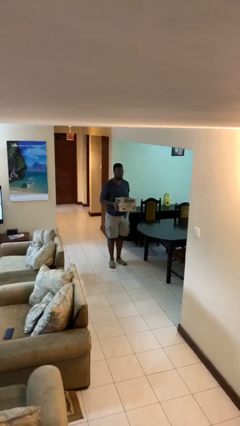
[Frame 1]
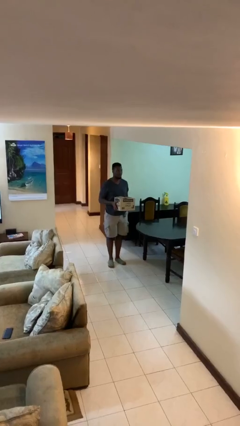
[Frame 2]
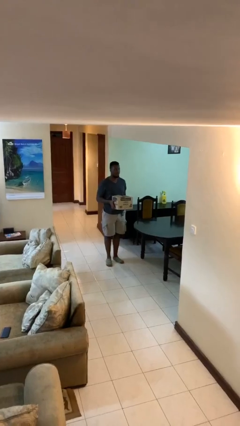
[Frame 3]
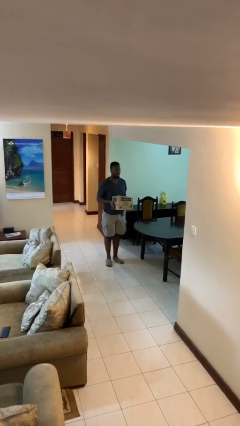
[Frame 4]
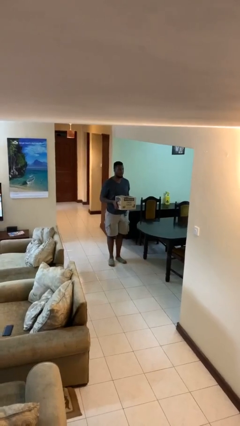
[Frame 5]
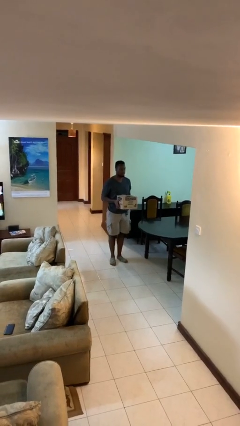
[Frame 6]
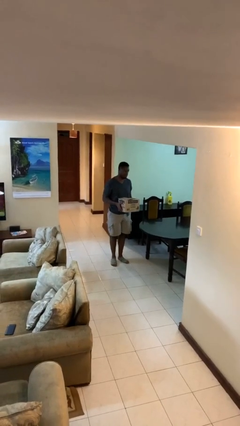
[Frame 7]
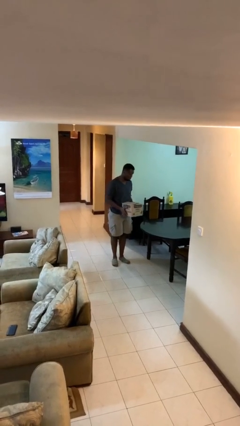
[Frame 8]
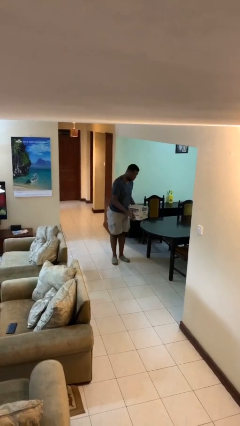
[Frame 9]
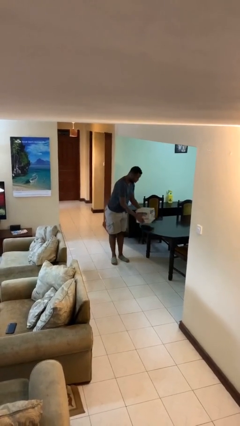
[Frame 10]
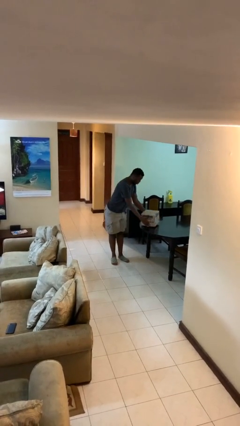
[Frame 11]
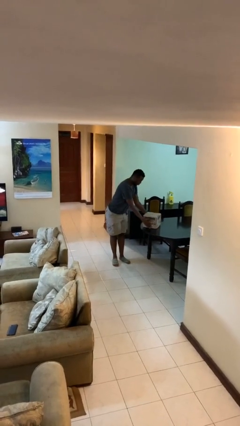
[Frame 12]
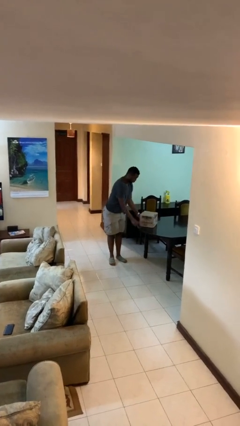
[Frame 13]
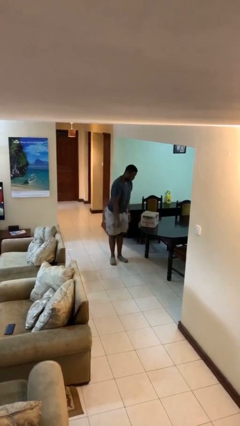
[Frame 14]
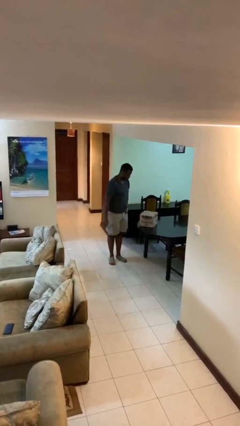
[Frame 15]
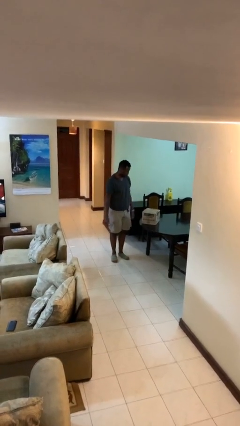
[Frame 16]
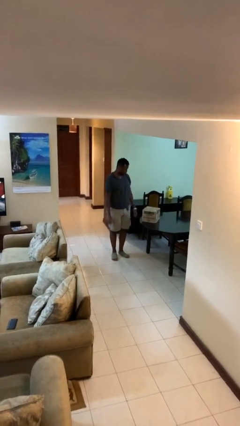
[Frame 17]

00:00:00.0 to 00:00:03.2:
person puts down object on table

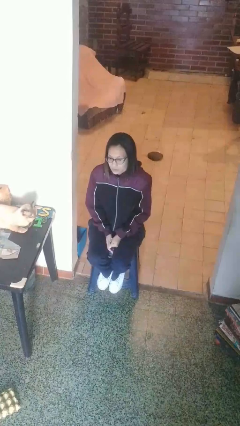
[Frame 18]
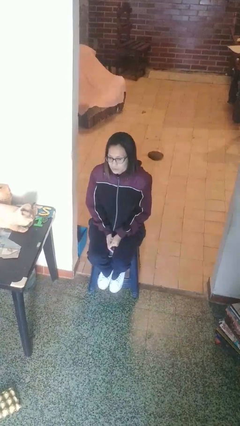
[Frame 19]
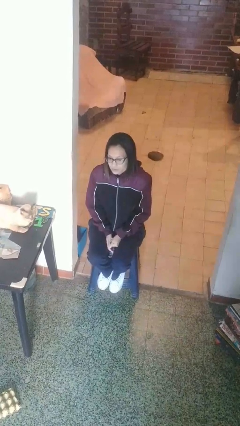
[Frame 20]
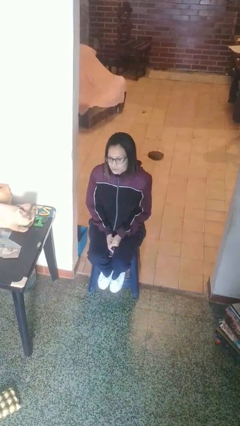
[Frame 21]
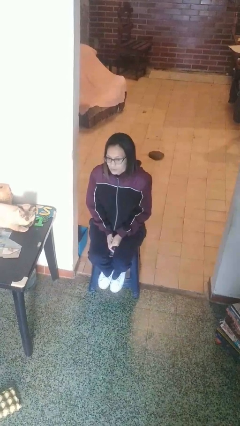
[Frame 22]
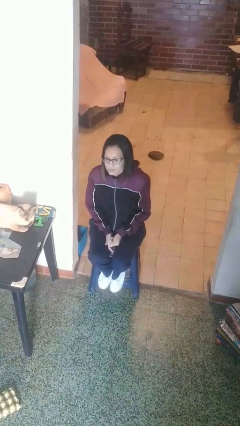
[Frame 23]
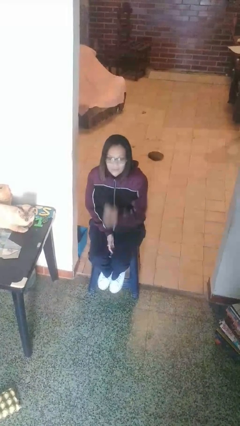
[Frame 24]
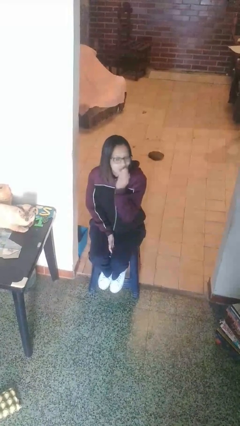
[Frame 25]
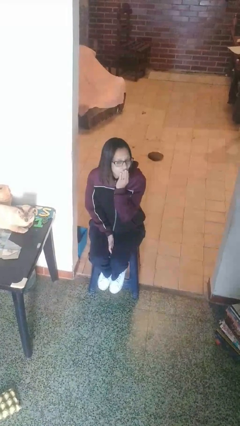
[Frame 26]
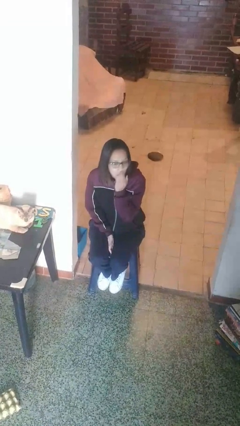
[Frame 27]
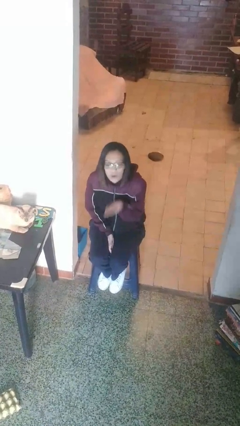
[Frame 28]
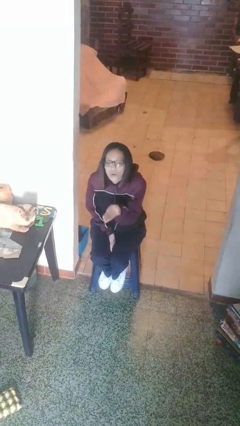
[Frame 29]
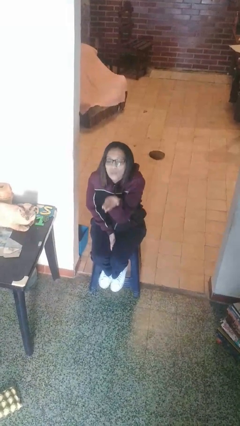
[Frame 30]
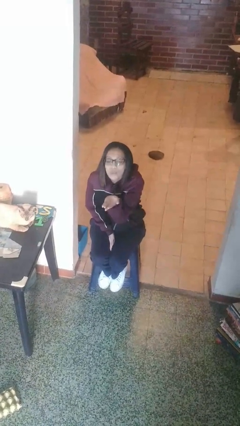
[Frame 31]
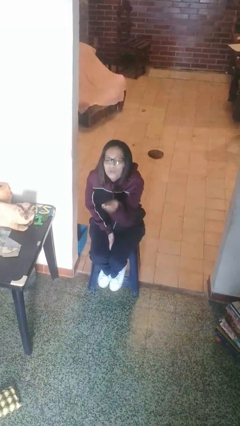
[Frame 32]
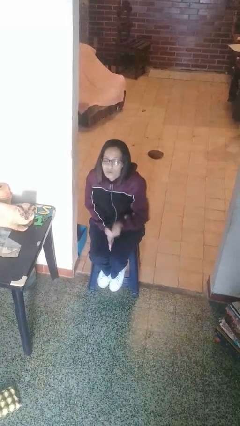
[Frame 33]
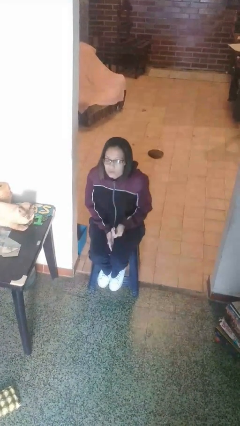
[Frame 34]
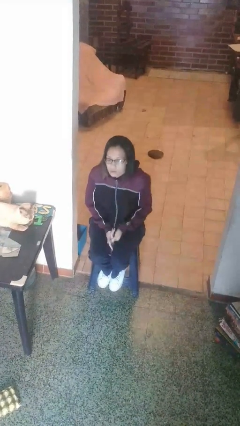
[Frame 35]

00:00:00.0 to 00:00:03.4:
person gestures blow kiss

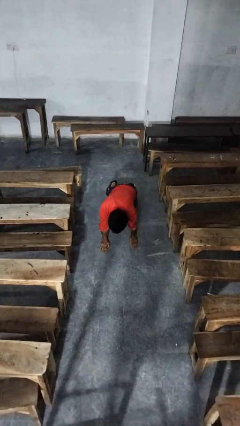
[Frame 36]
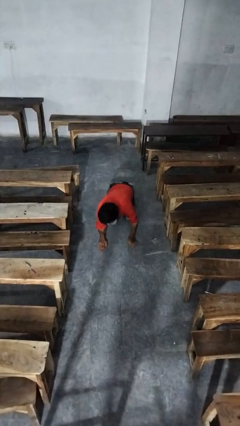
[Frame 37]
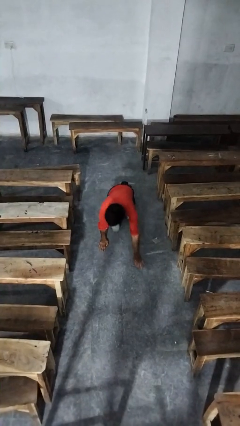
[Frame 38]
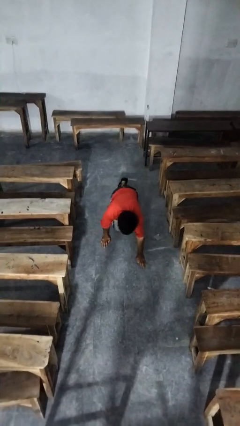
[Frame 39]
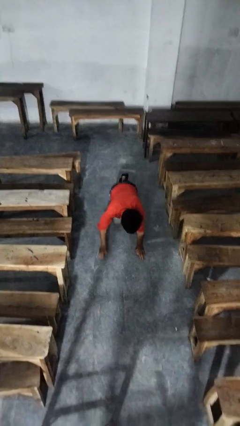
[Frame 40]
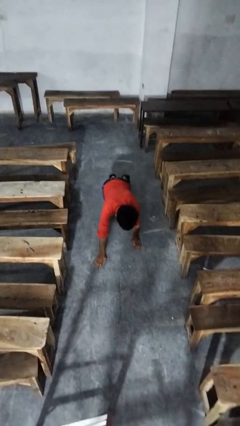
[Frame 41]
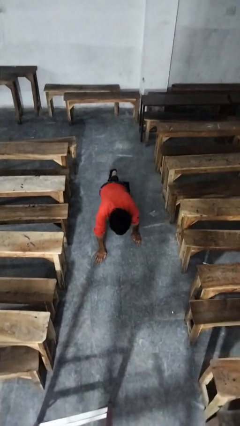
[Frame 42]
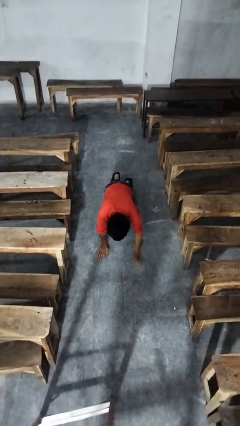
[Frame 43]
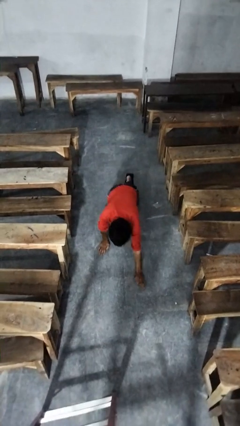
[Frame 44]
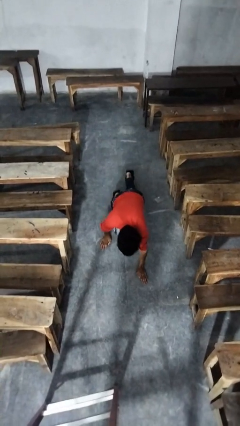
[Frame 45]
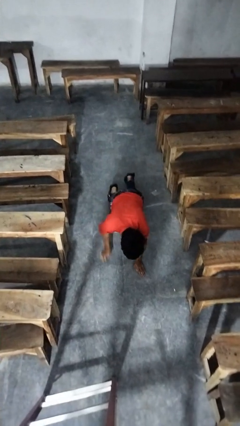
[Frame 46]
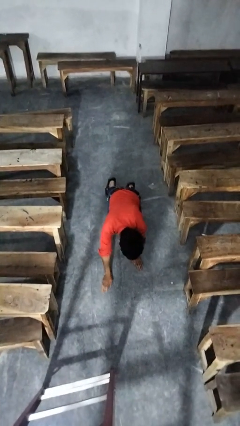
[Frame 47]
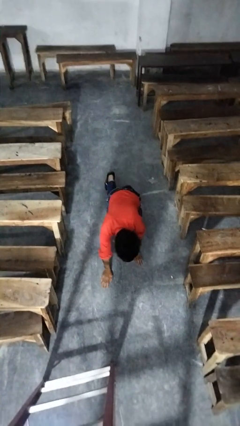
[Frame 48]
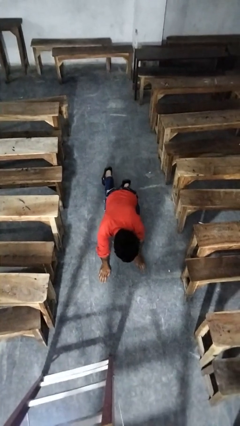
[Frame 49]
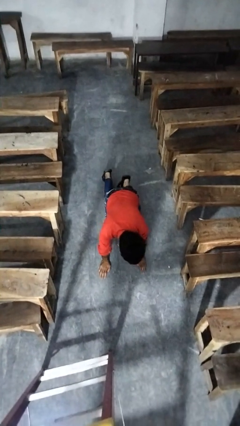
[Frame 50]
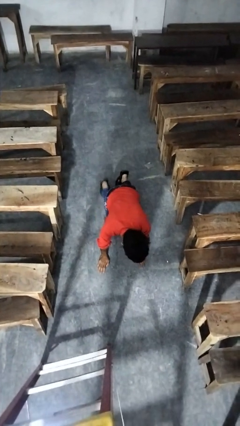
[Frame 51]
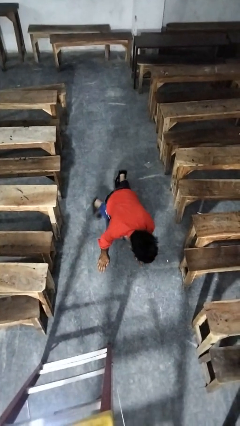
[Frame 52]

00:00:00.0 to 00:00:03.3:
person crawls

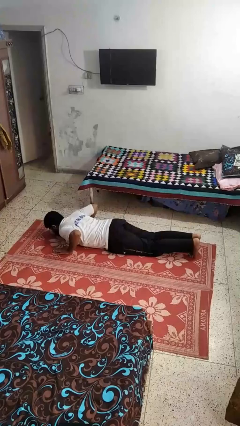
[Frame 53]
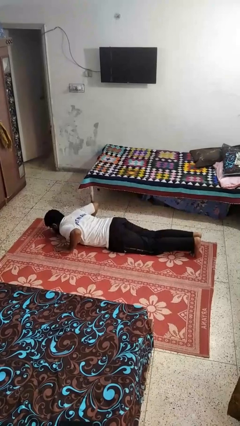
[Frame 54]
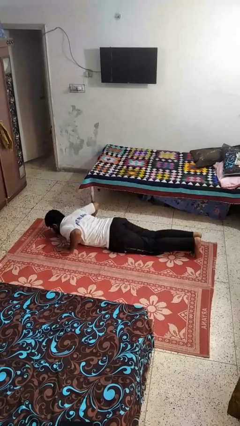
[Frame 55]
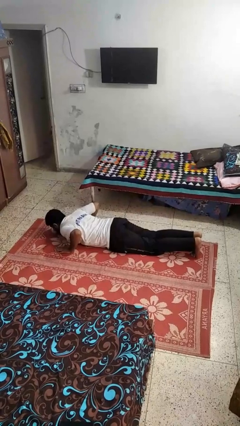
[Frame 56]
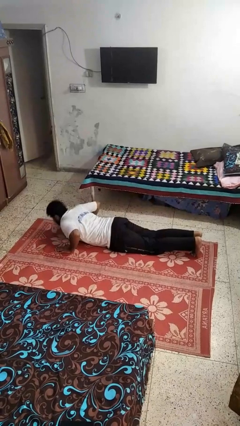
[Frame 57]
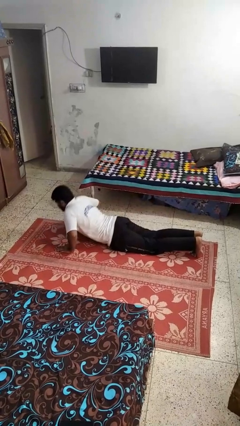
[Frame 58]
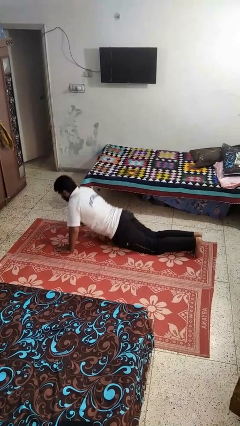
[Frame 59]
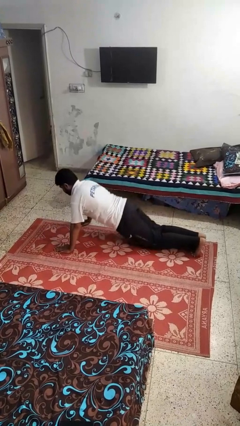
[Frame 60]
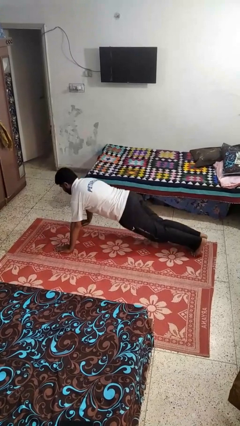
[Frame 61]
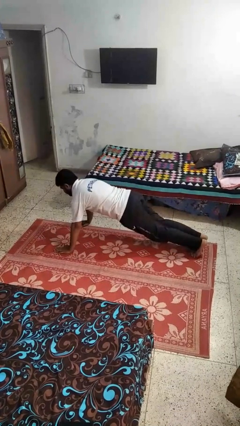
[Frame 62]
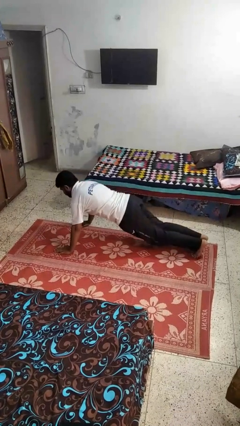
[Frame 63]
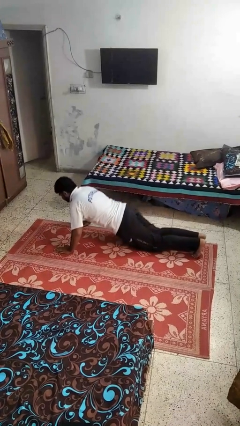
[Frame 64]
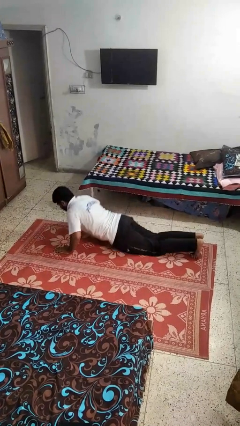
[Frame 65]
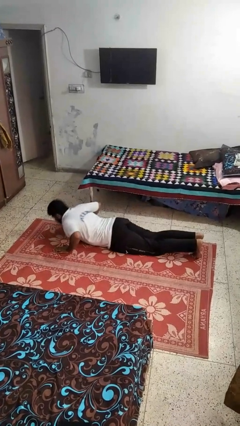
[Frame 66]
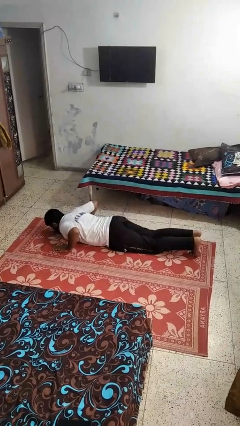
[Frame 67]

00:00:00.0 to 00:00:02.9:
person exercises with pushup

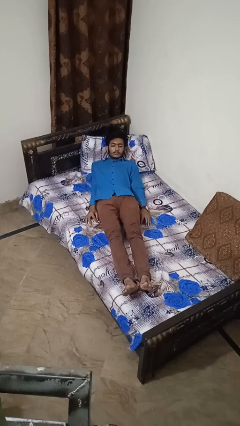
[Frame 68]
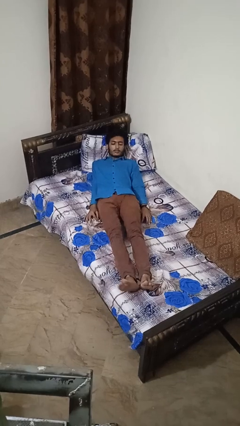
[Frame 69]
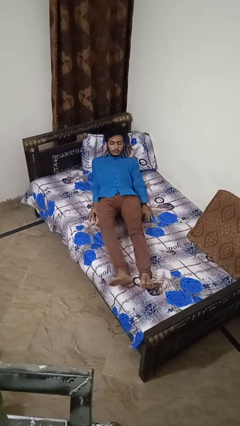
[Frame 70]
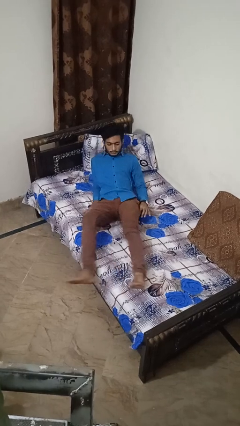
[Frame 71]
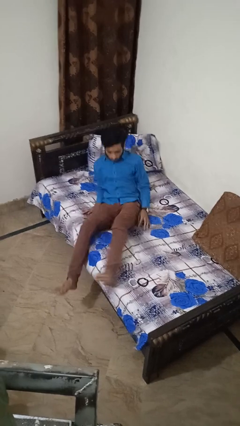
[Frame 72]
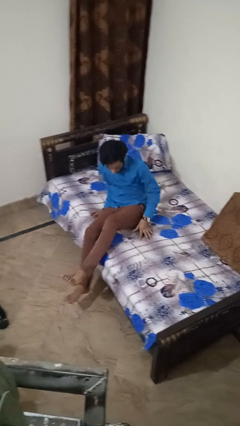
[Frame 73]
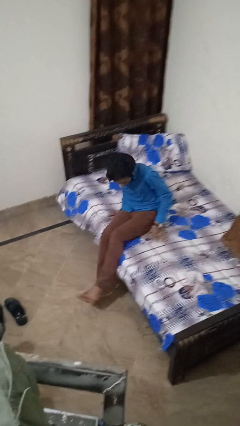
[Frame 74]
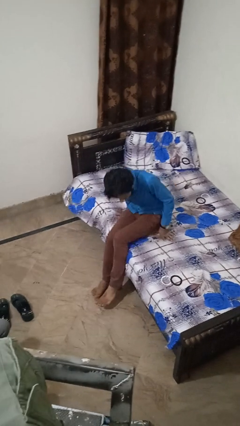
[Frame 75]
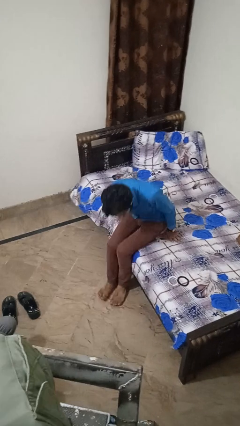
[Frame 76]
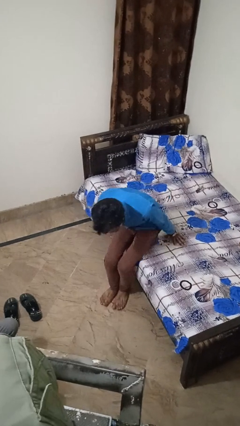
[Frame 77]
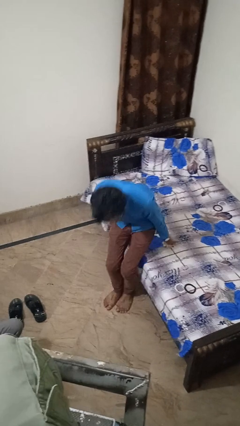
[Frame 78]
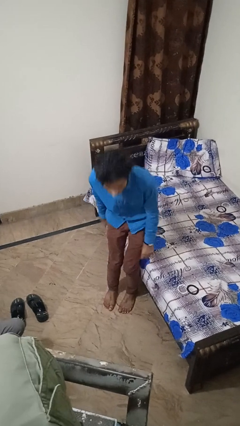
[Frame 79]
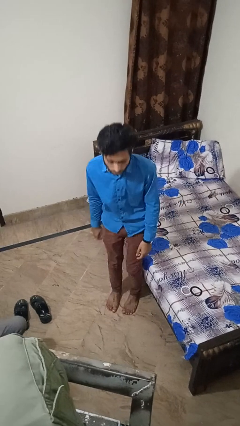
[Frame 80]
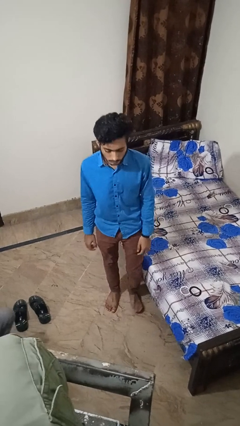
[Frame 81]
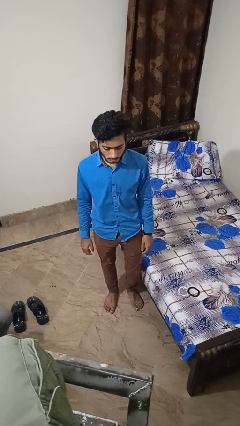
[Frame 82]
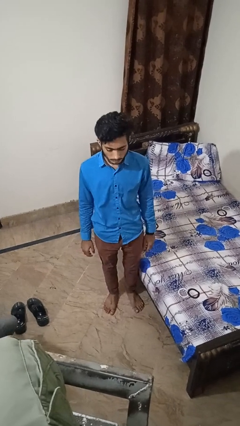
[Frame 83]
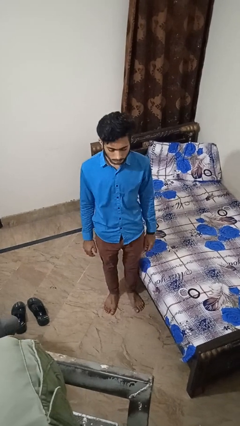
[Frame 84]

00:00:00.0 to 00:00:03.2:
person stands up

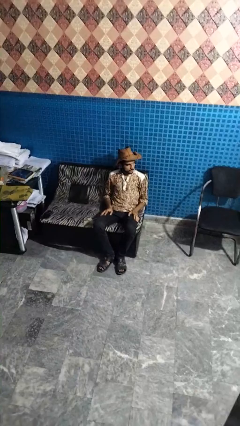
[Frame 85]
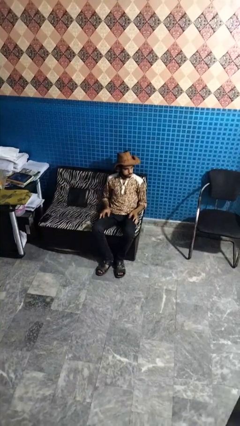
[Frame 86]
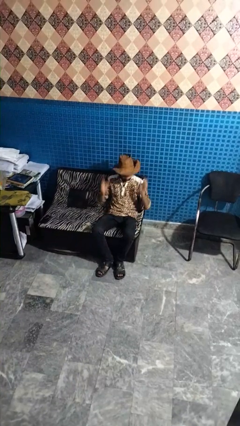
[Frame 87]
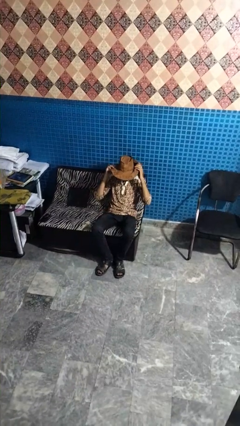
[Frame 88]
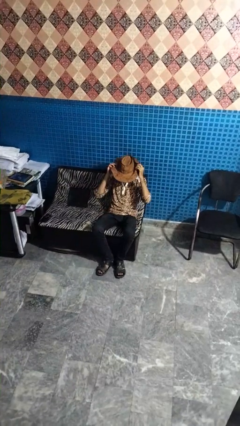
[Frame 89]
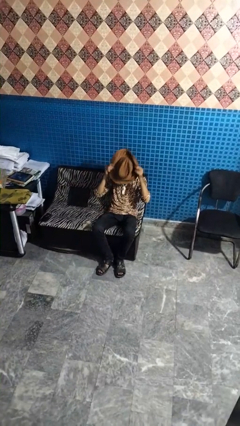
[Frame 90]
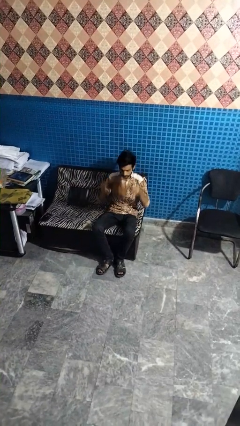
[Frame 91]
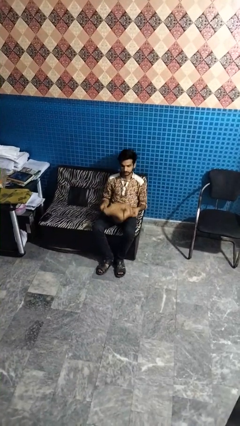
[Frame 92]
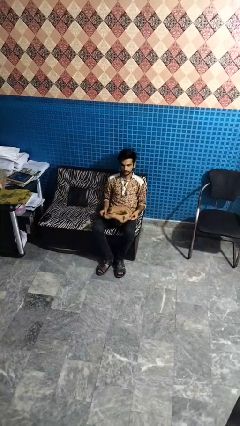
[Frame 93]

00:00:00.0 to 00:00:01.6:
person takes off hat

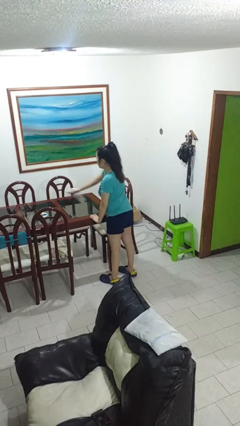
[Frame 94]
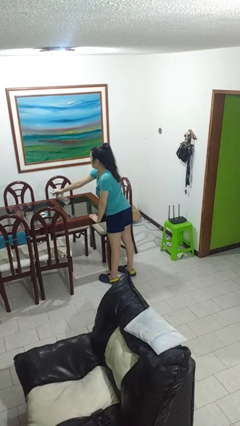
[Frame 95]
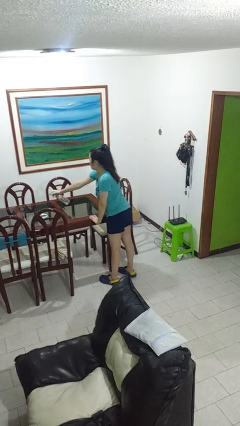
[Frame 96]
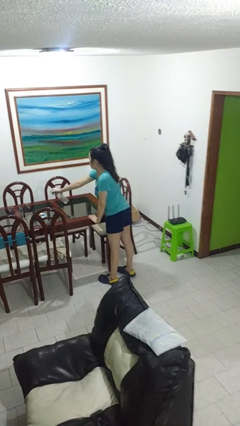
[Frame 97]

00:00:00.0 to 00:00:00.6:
person sprays from bottle
